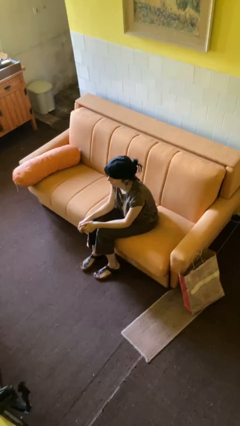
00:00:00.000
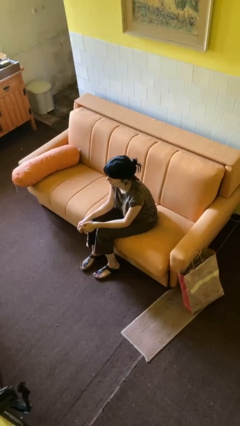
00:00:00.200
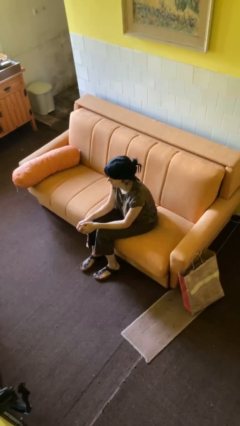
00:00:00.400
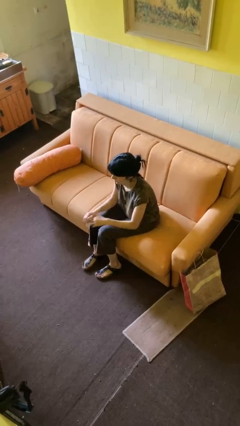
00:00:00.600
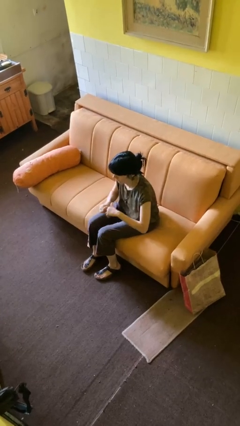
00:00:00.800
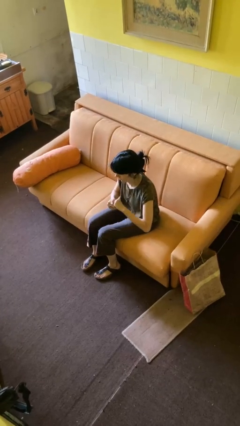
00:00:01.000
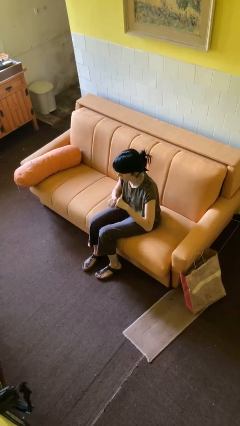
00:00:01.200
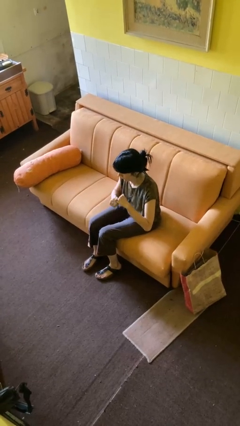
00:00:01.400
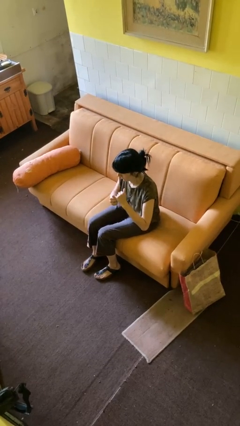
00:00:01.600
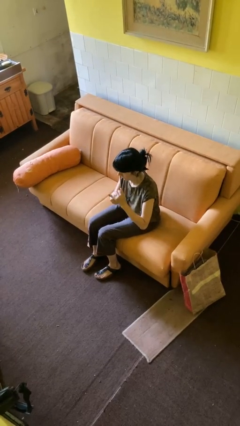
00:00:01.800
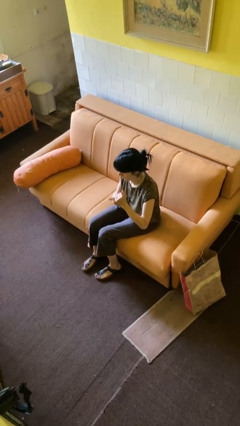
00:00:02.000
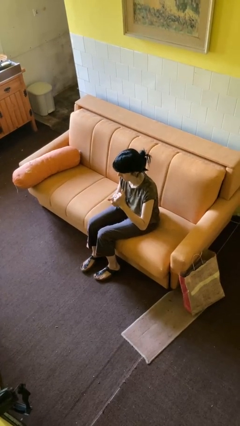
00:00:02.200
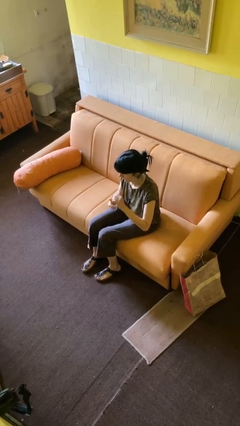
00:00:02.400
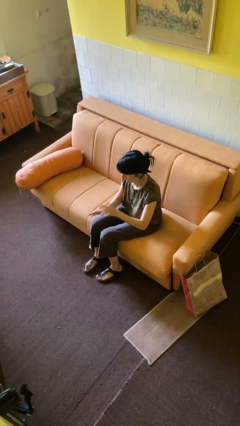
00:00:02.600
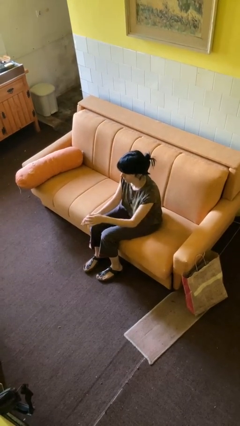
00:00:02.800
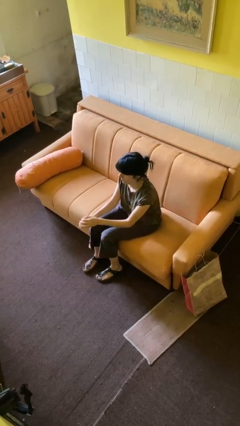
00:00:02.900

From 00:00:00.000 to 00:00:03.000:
person cracks knuckles

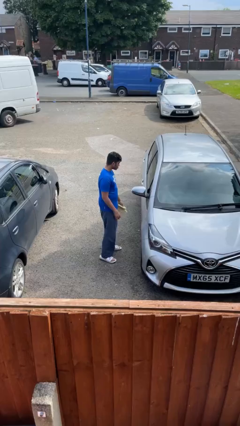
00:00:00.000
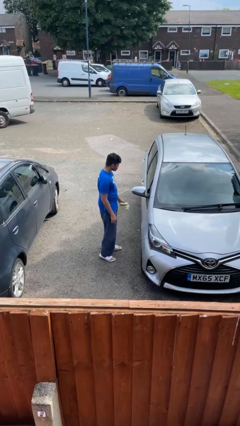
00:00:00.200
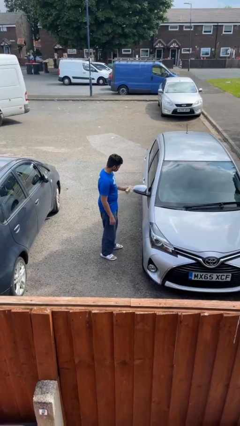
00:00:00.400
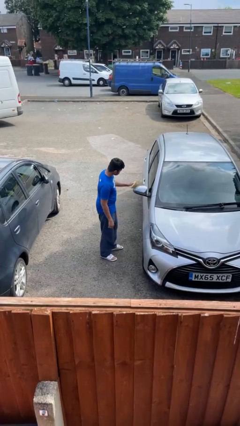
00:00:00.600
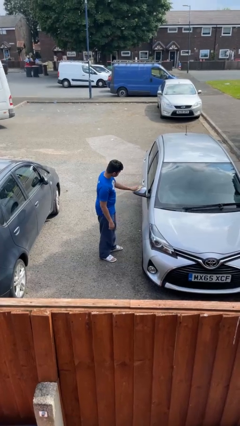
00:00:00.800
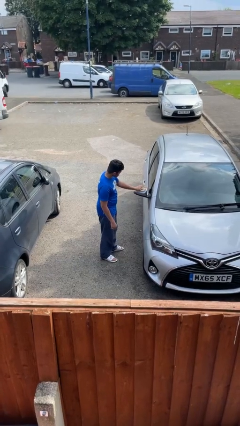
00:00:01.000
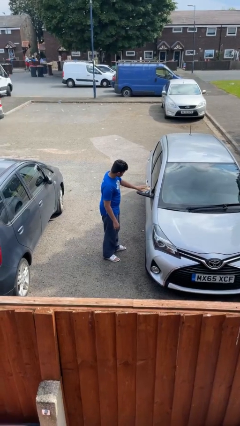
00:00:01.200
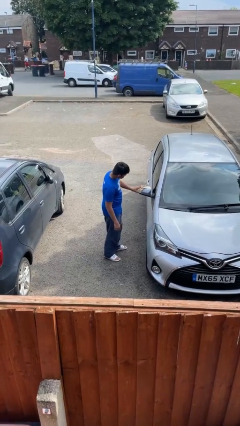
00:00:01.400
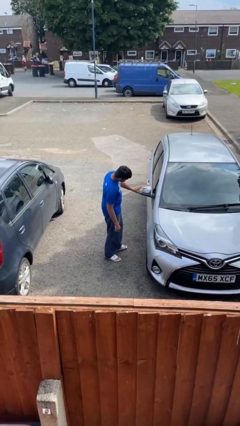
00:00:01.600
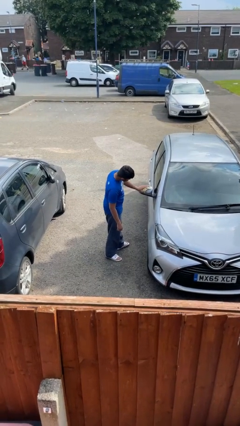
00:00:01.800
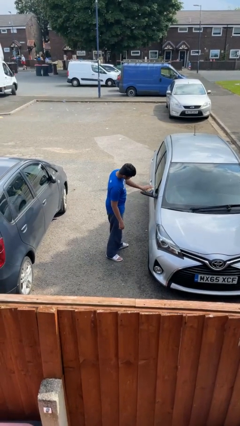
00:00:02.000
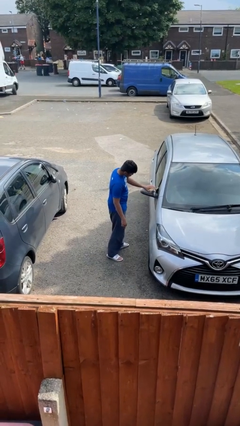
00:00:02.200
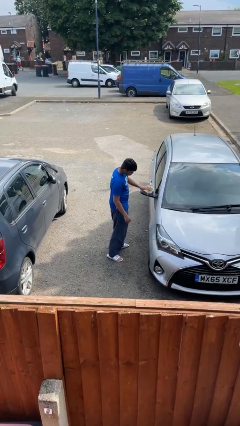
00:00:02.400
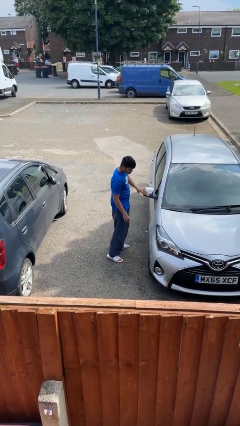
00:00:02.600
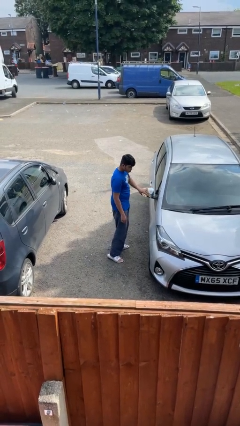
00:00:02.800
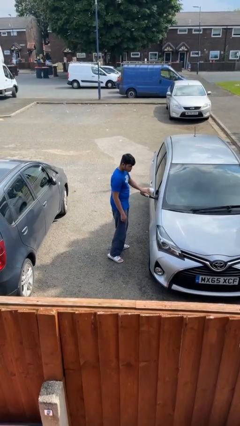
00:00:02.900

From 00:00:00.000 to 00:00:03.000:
person polishes car with rag

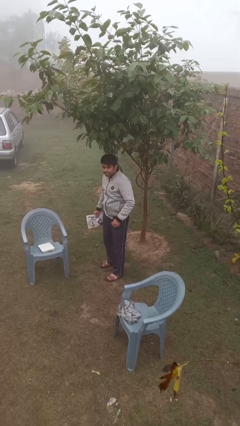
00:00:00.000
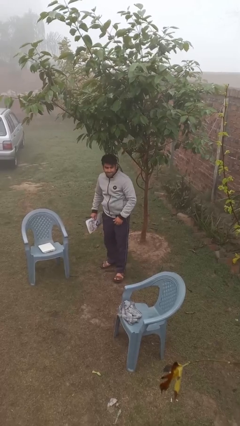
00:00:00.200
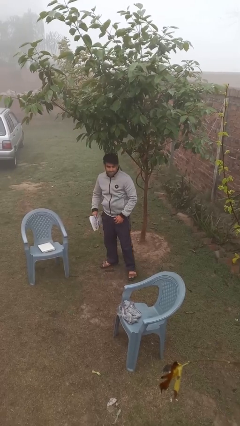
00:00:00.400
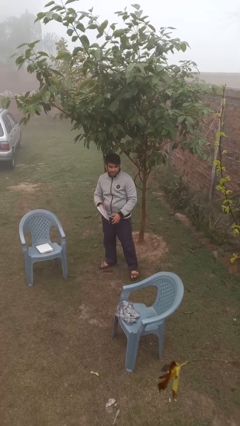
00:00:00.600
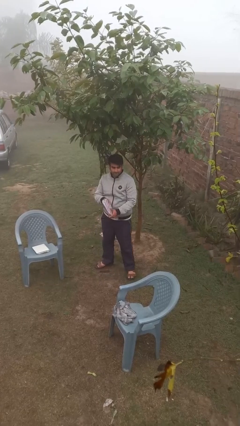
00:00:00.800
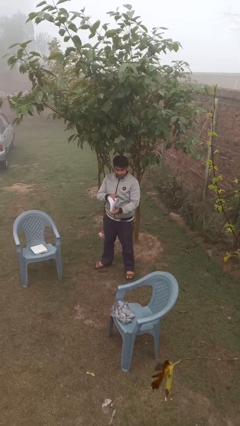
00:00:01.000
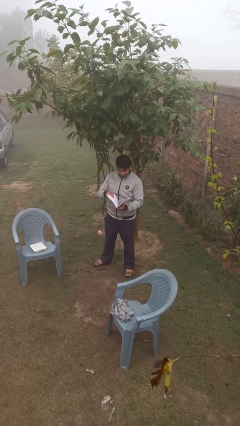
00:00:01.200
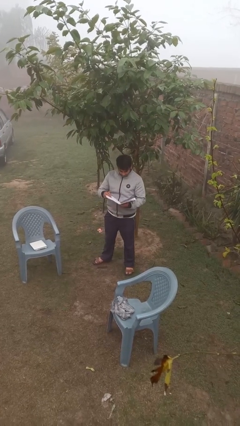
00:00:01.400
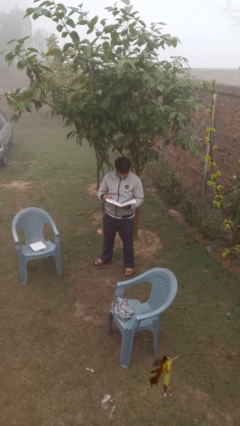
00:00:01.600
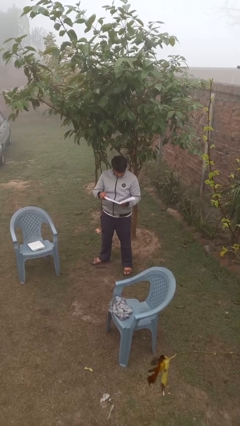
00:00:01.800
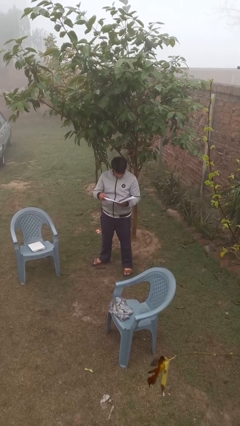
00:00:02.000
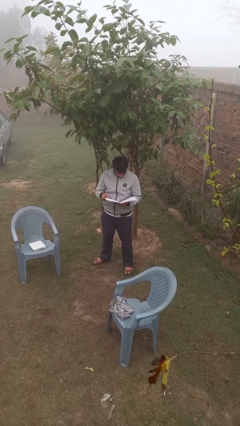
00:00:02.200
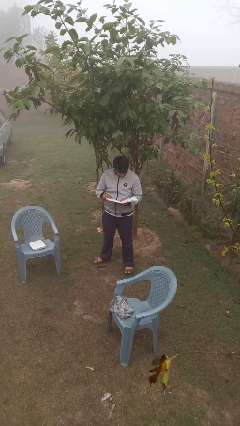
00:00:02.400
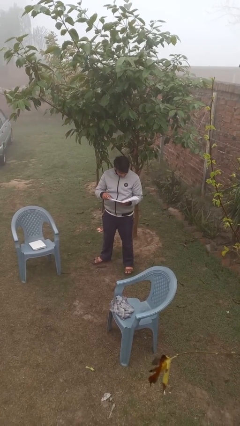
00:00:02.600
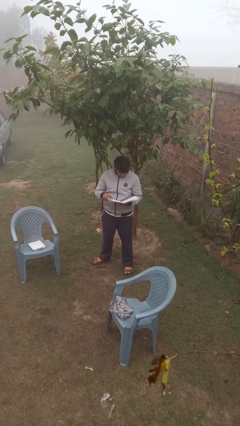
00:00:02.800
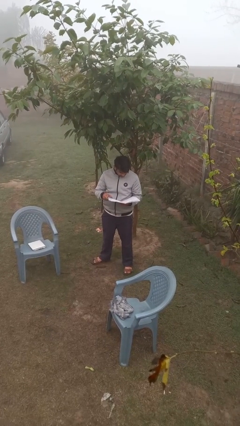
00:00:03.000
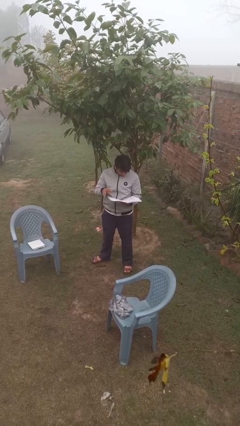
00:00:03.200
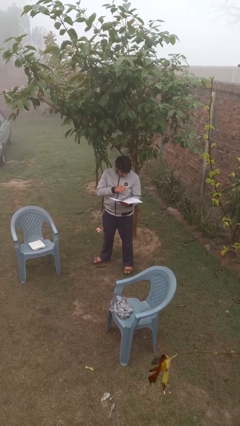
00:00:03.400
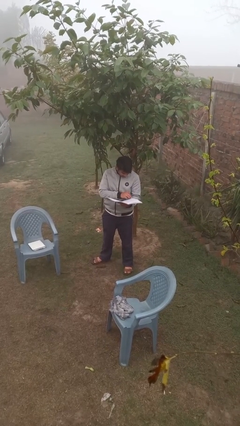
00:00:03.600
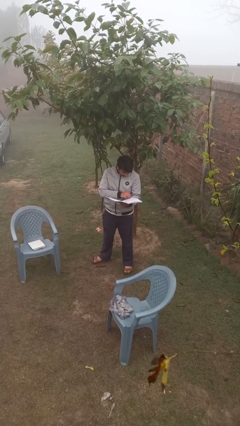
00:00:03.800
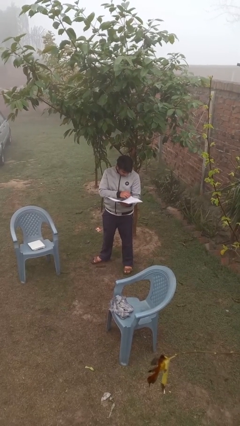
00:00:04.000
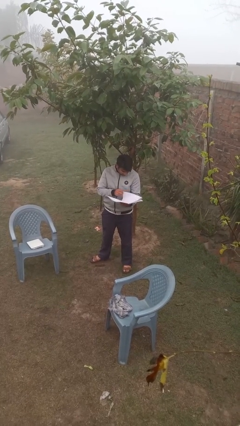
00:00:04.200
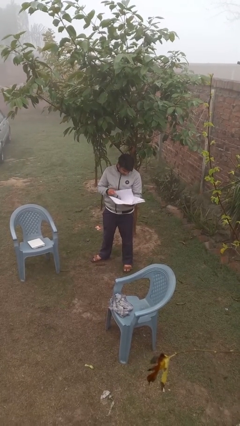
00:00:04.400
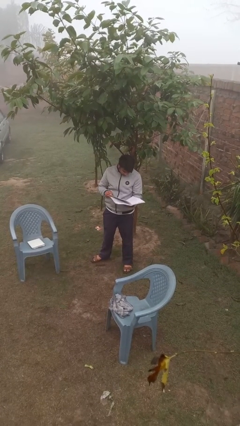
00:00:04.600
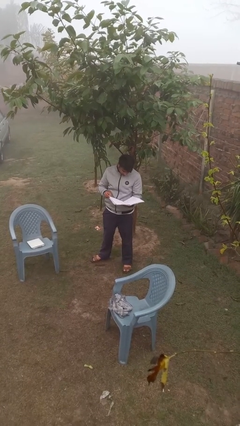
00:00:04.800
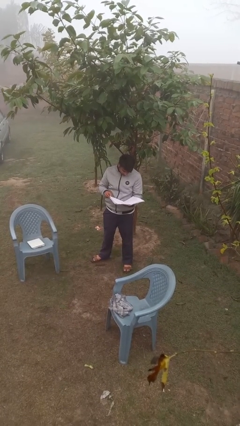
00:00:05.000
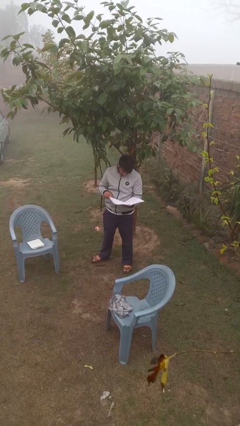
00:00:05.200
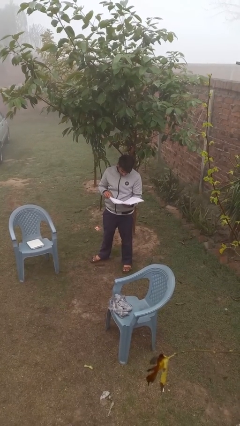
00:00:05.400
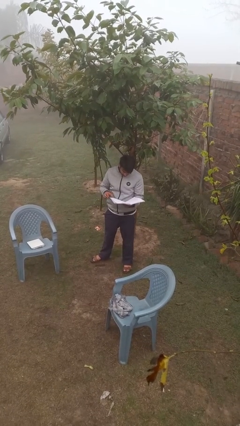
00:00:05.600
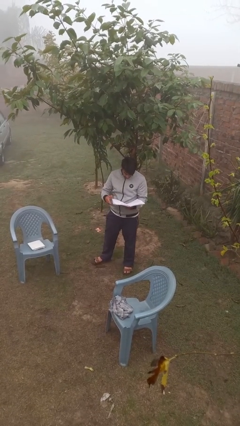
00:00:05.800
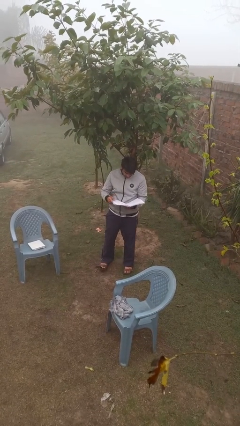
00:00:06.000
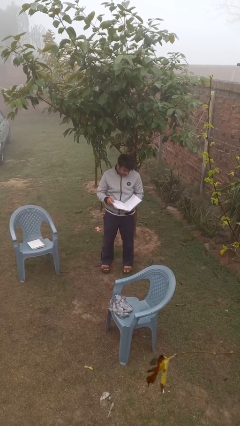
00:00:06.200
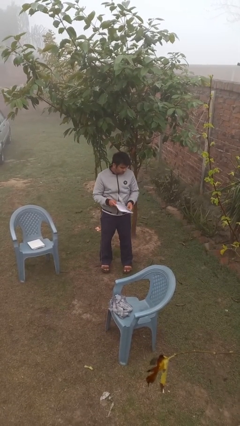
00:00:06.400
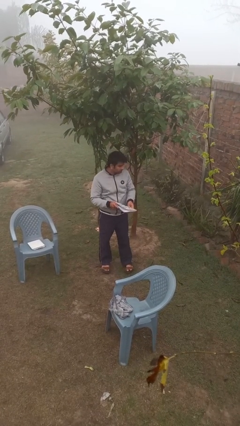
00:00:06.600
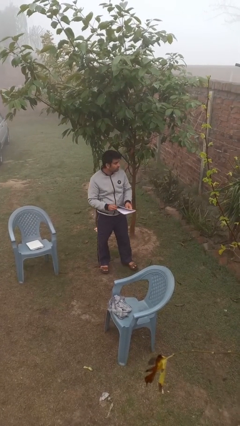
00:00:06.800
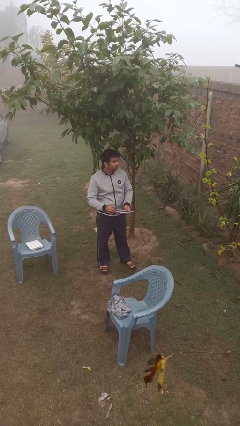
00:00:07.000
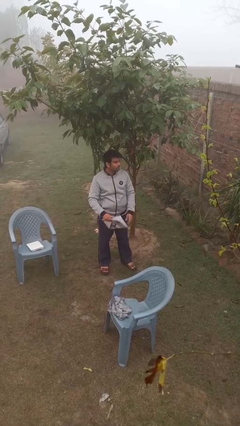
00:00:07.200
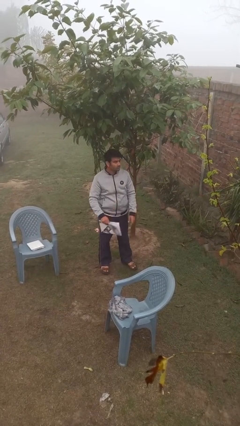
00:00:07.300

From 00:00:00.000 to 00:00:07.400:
person reads document

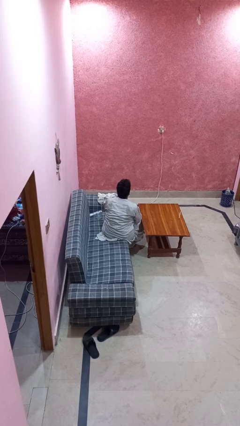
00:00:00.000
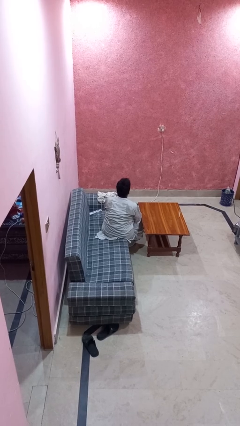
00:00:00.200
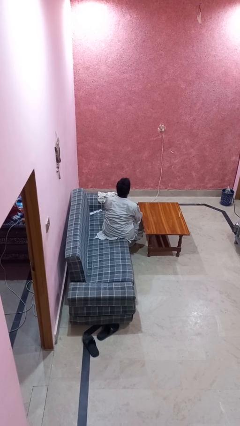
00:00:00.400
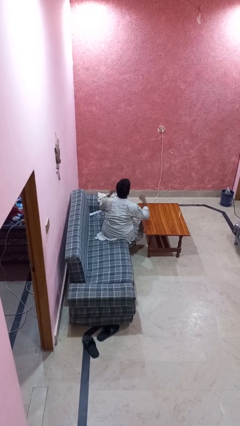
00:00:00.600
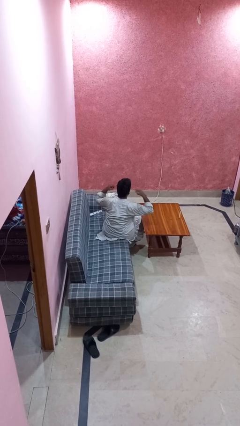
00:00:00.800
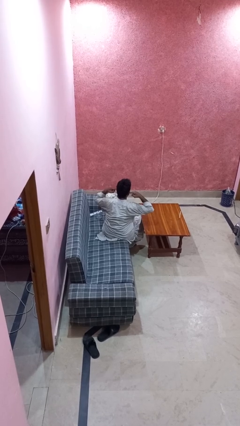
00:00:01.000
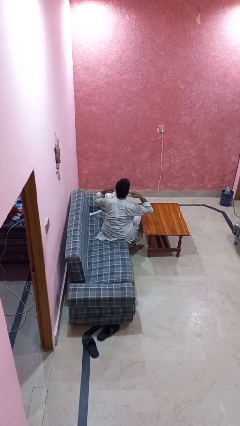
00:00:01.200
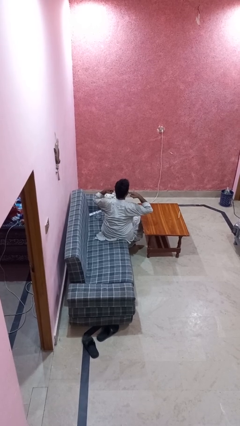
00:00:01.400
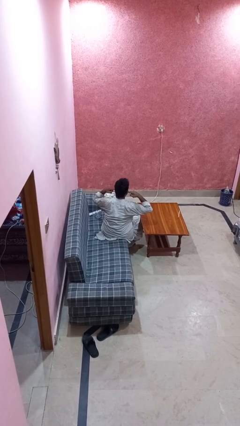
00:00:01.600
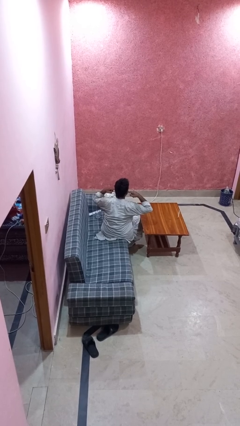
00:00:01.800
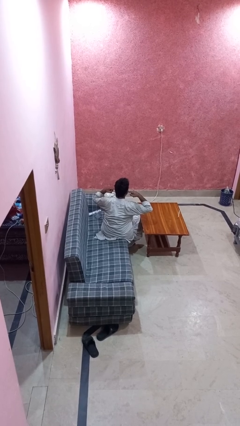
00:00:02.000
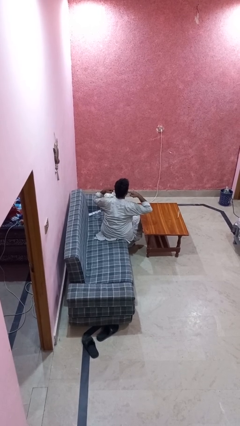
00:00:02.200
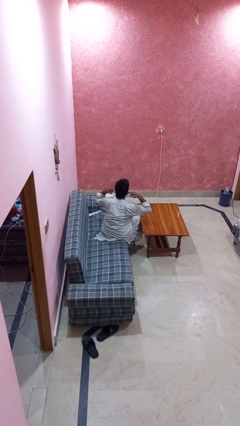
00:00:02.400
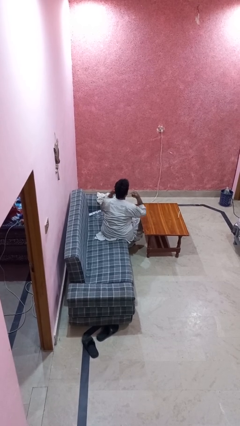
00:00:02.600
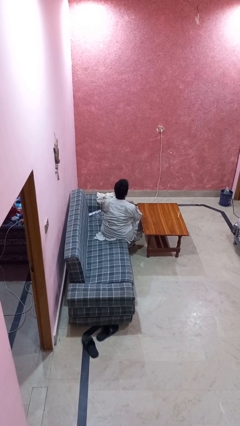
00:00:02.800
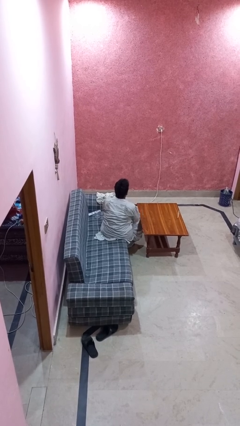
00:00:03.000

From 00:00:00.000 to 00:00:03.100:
person puts fingers in ear

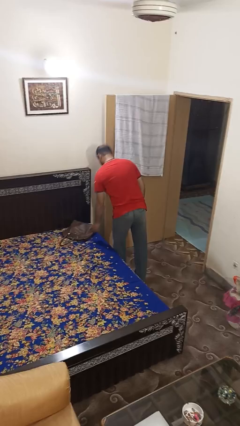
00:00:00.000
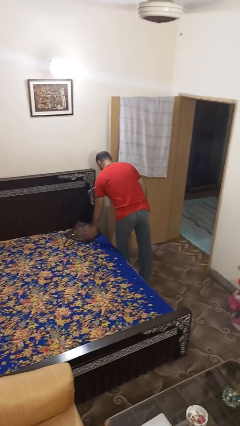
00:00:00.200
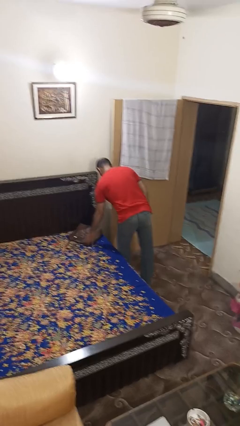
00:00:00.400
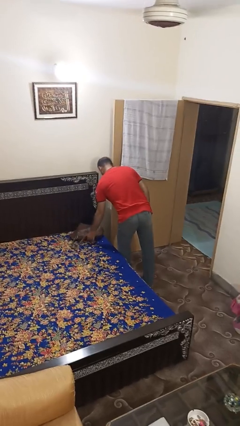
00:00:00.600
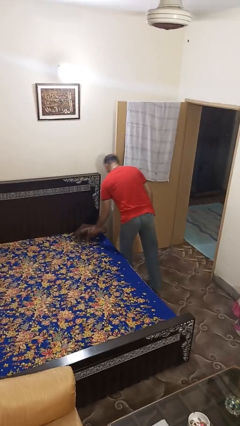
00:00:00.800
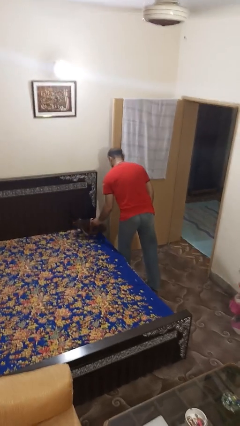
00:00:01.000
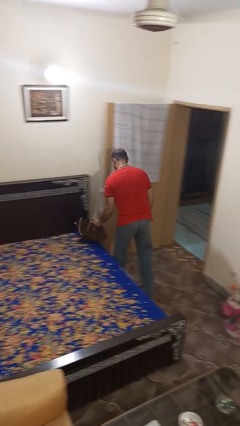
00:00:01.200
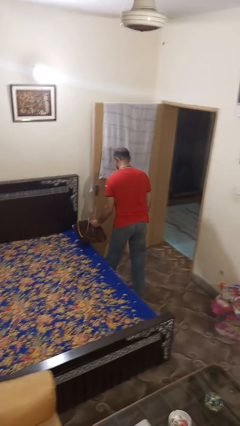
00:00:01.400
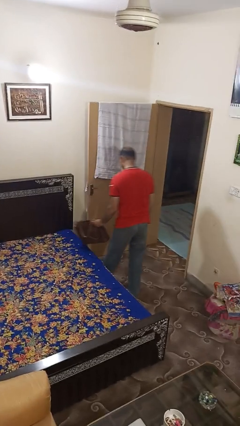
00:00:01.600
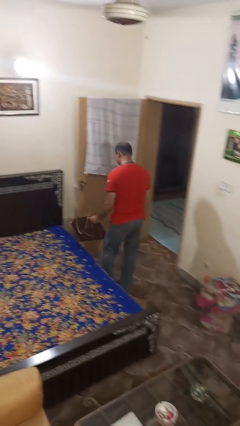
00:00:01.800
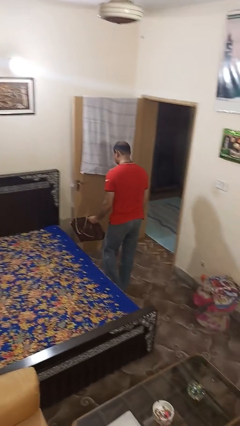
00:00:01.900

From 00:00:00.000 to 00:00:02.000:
person picks up object from bed
